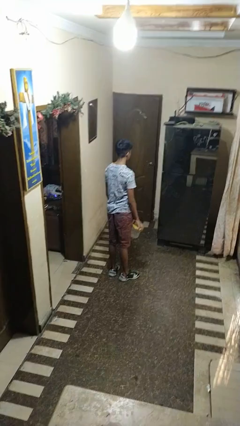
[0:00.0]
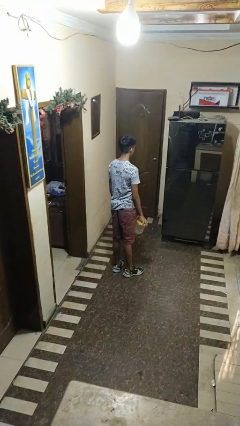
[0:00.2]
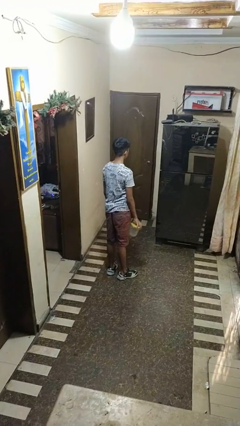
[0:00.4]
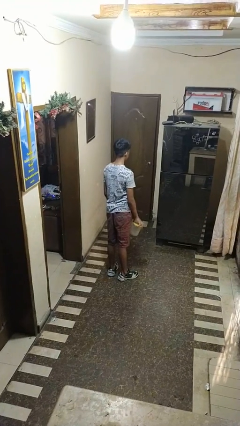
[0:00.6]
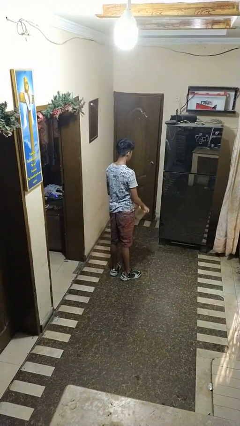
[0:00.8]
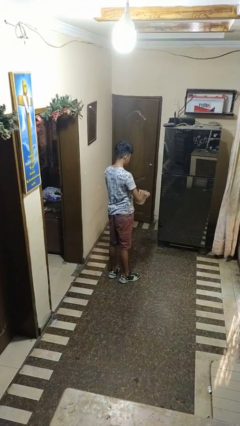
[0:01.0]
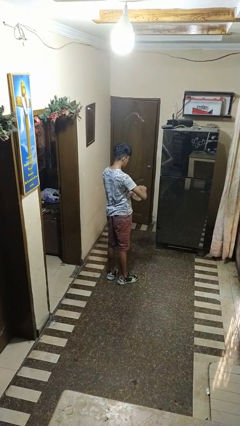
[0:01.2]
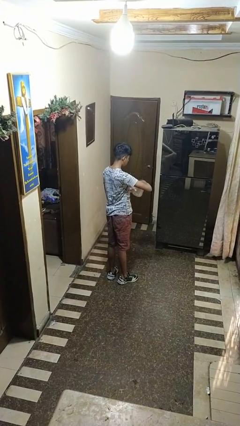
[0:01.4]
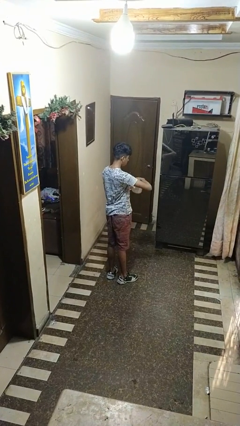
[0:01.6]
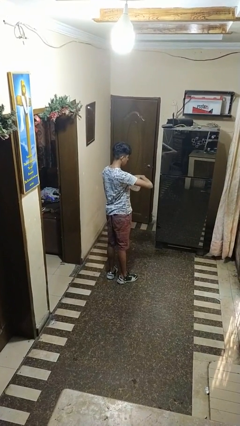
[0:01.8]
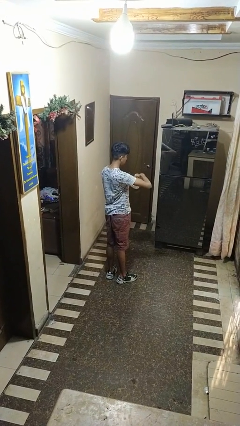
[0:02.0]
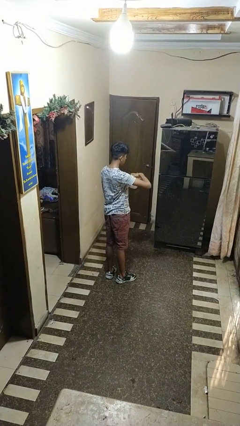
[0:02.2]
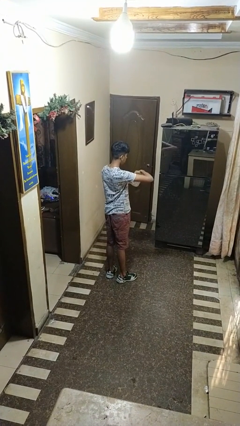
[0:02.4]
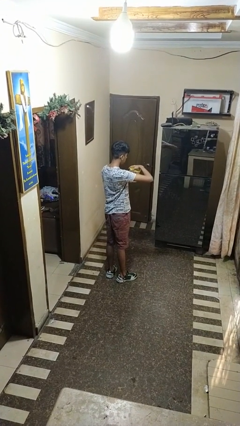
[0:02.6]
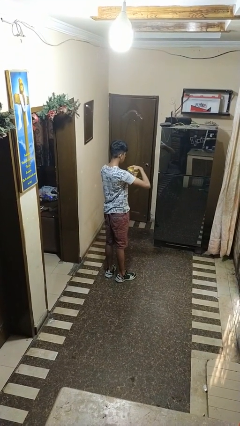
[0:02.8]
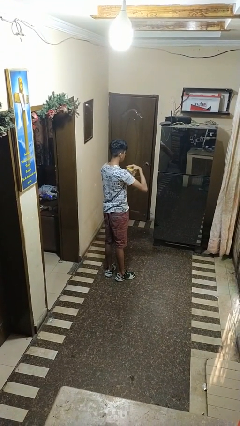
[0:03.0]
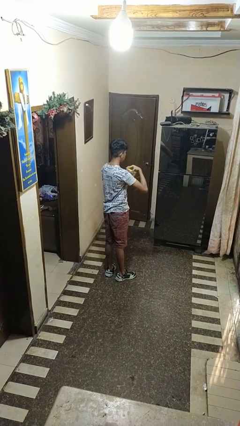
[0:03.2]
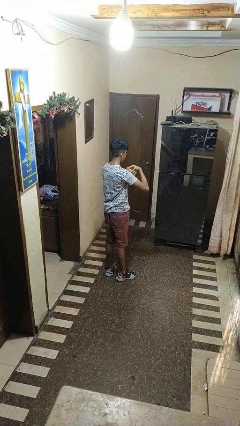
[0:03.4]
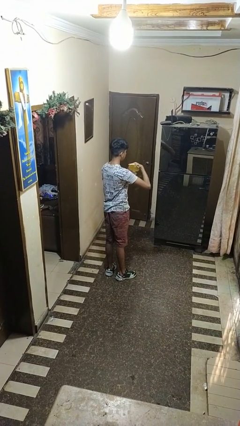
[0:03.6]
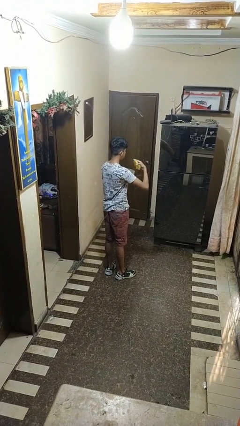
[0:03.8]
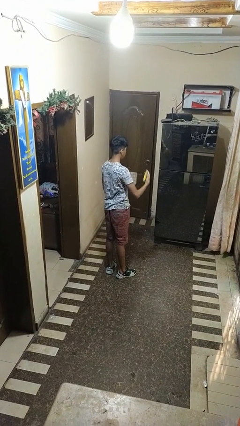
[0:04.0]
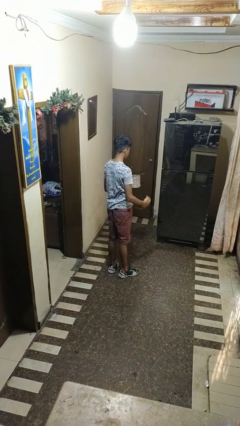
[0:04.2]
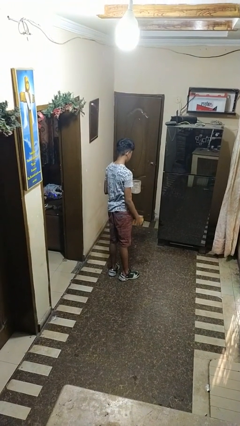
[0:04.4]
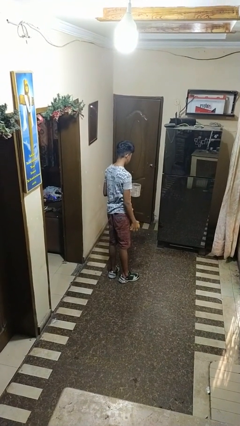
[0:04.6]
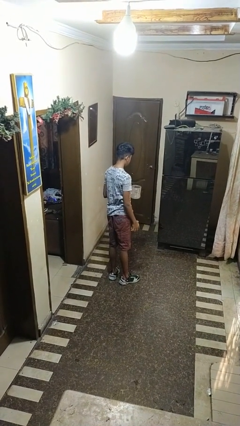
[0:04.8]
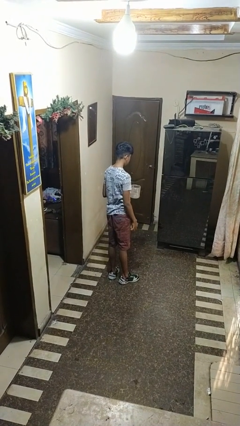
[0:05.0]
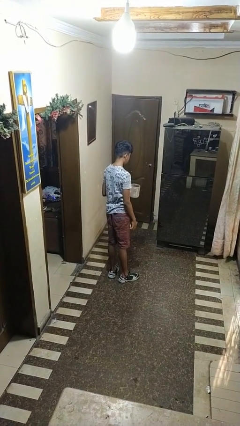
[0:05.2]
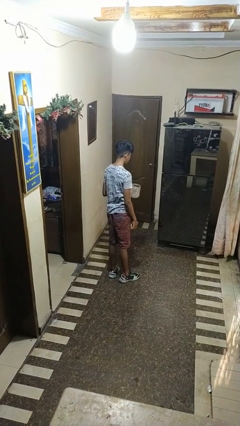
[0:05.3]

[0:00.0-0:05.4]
person opens jar

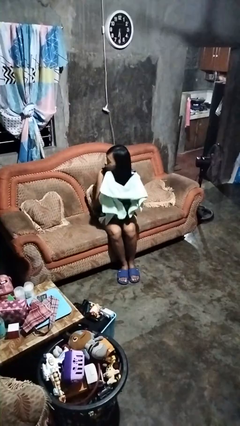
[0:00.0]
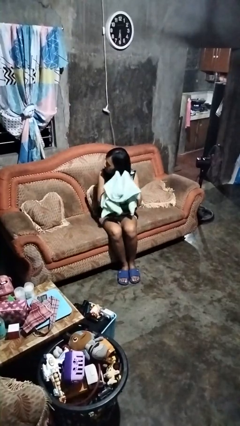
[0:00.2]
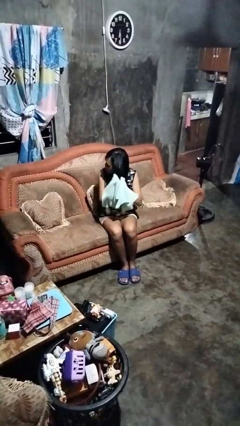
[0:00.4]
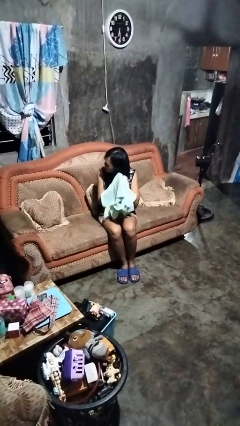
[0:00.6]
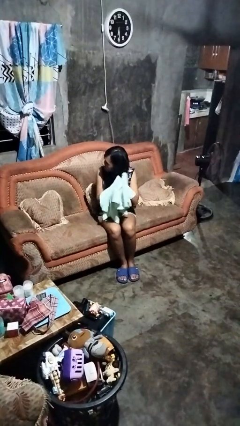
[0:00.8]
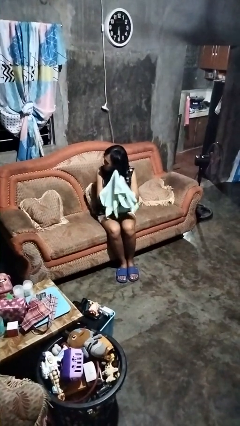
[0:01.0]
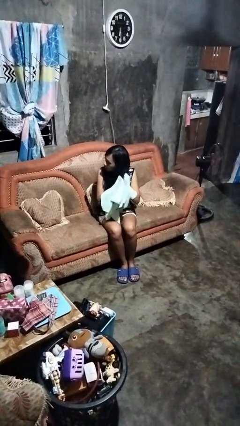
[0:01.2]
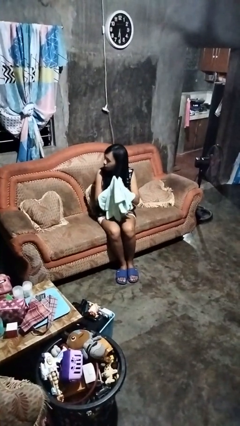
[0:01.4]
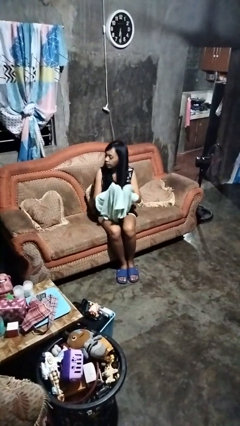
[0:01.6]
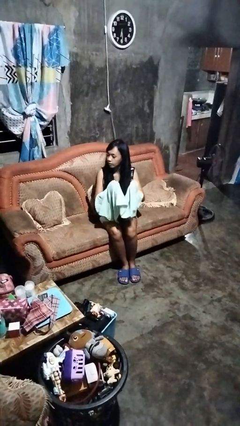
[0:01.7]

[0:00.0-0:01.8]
person dries hair with towel

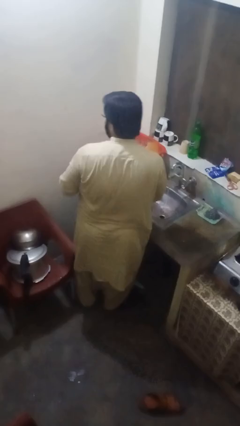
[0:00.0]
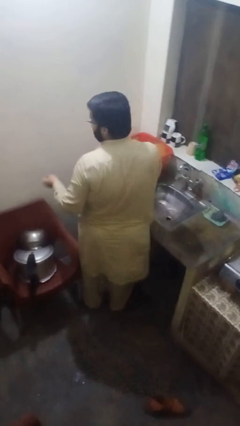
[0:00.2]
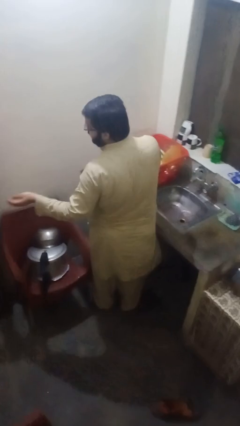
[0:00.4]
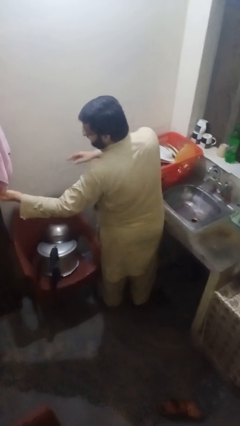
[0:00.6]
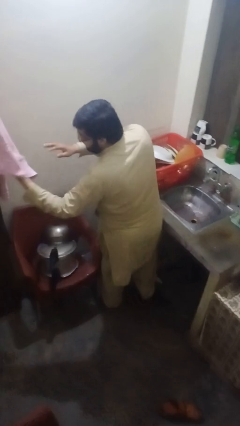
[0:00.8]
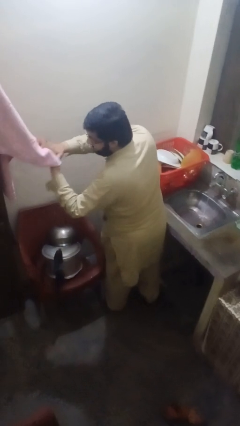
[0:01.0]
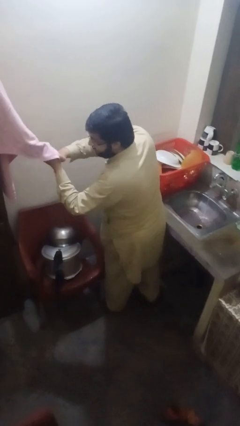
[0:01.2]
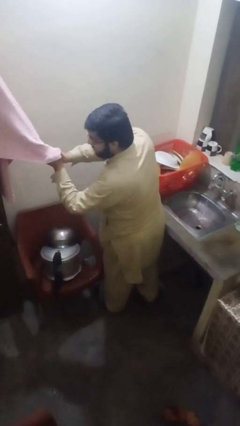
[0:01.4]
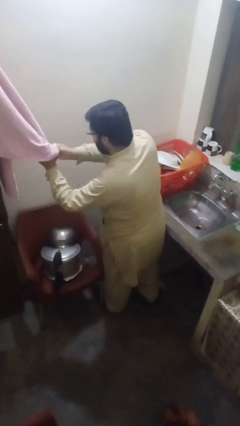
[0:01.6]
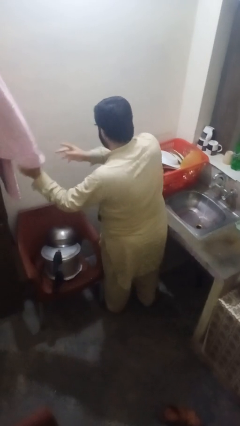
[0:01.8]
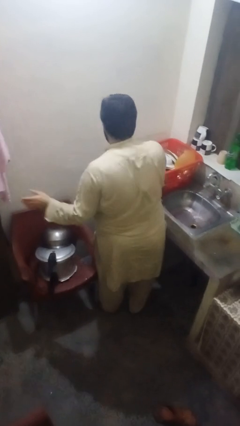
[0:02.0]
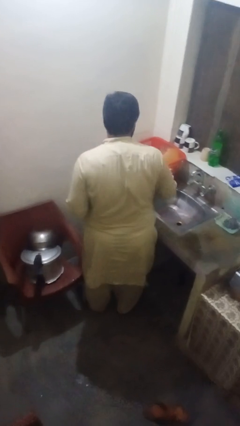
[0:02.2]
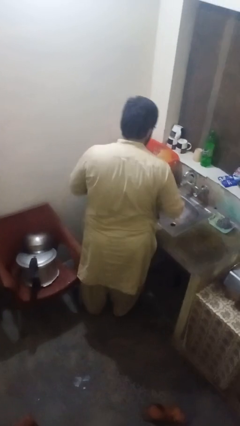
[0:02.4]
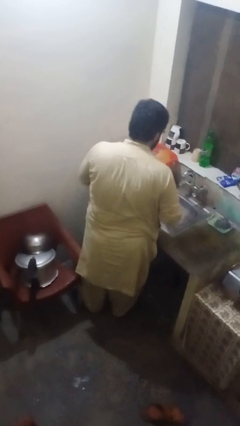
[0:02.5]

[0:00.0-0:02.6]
person dries hands with towel

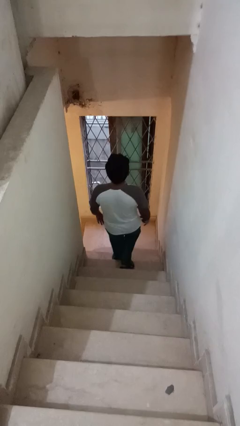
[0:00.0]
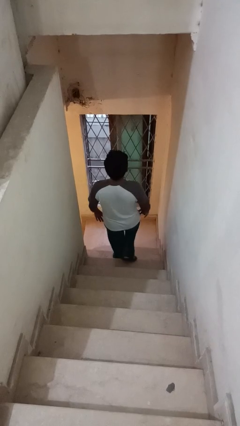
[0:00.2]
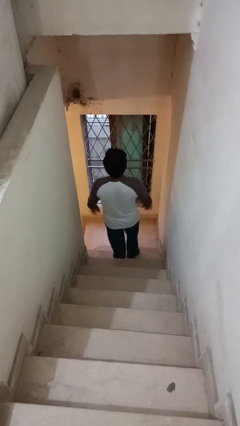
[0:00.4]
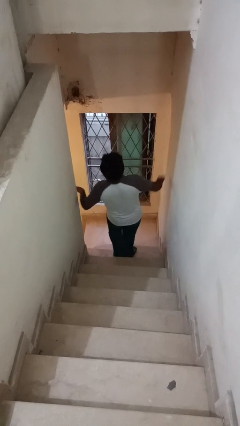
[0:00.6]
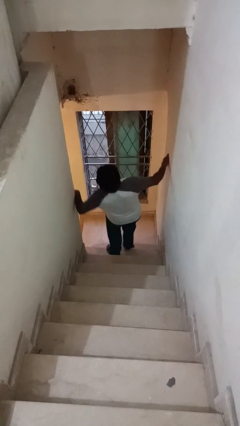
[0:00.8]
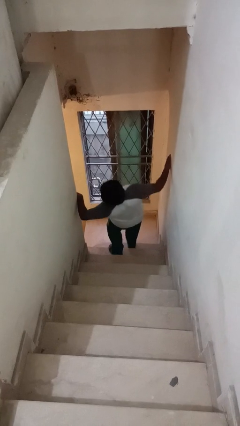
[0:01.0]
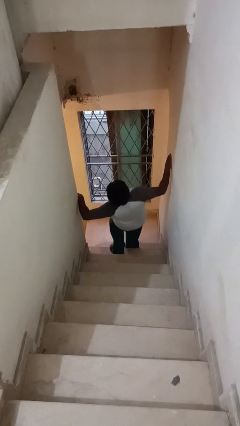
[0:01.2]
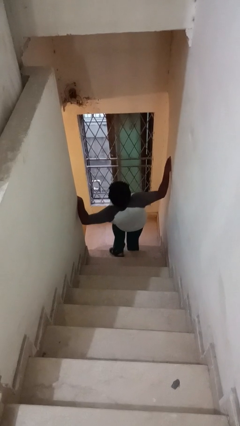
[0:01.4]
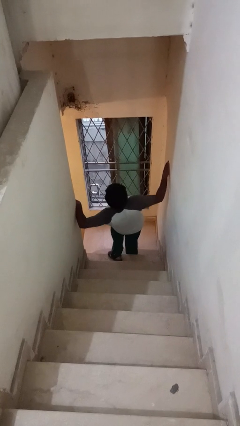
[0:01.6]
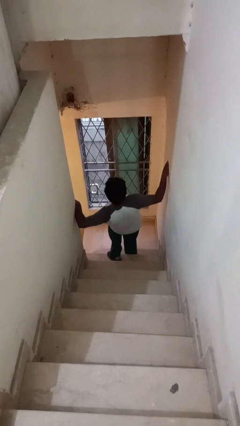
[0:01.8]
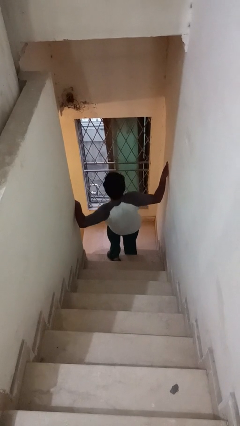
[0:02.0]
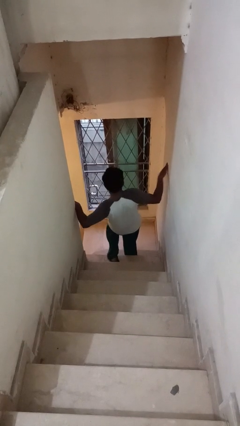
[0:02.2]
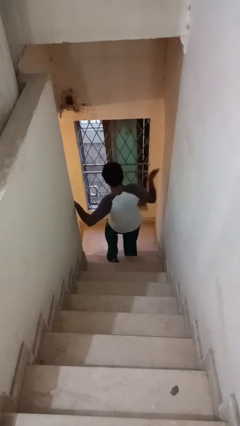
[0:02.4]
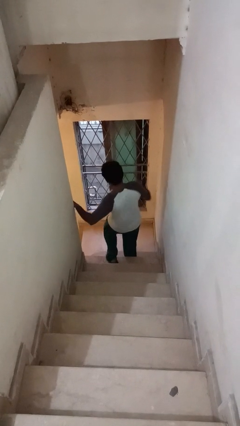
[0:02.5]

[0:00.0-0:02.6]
person trips on stair

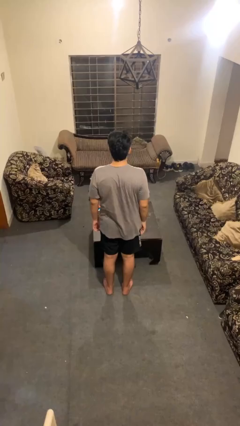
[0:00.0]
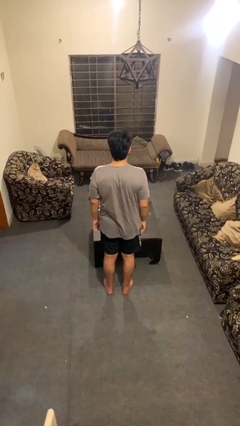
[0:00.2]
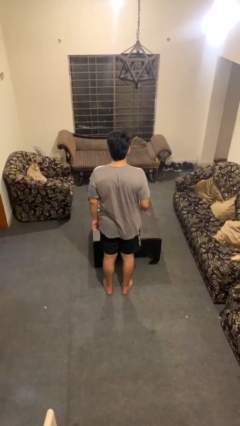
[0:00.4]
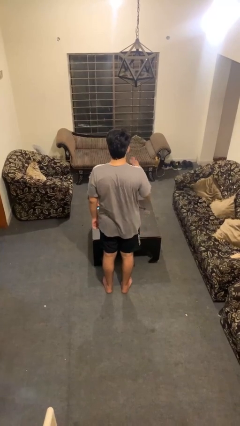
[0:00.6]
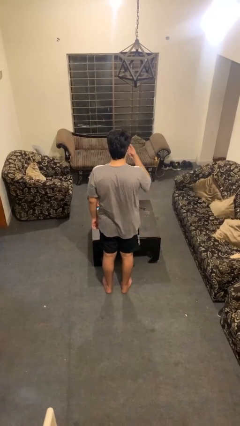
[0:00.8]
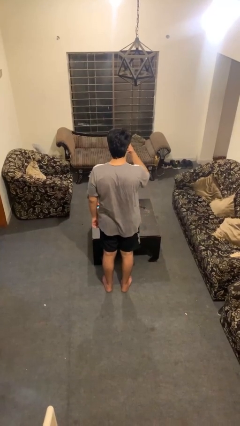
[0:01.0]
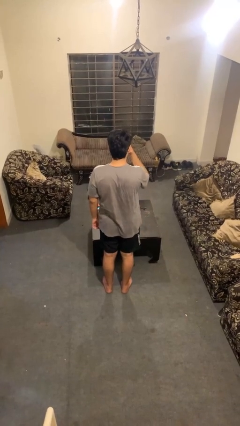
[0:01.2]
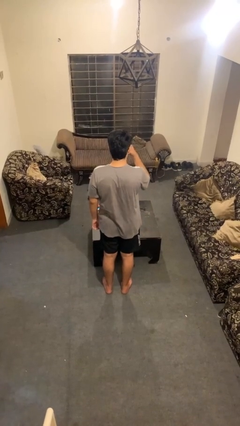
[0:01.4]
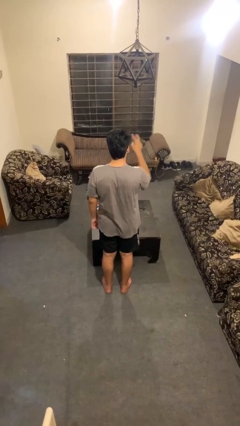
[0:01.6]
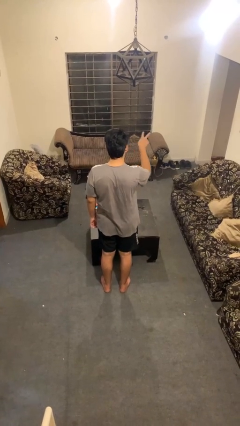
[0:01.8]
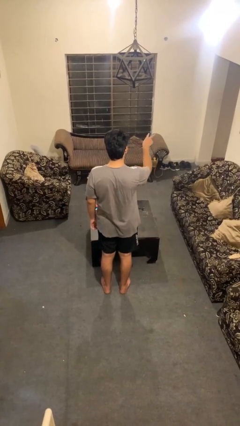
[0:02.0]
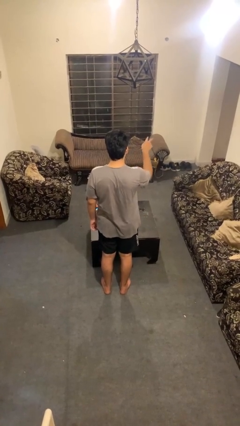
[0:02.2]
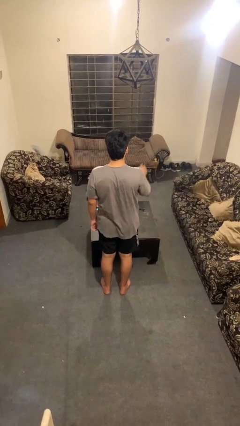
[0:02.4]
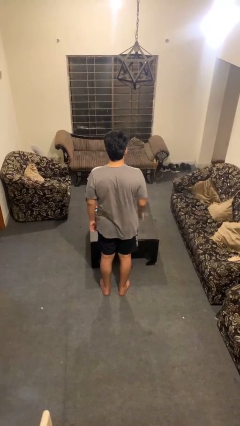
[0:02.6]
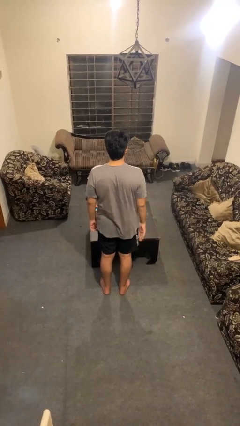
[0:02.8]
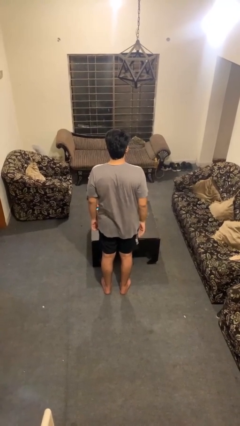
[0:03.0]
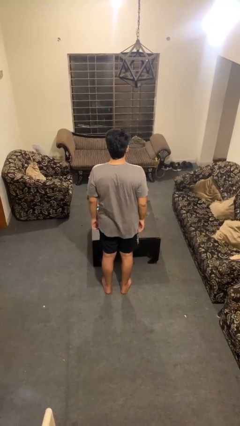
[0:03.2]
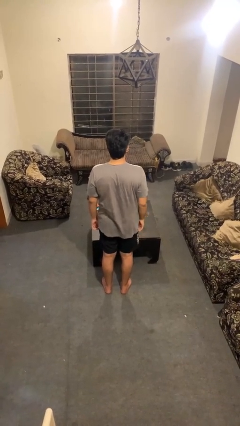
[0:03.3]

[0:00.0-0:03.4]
person gestures watch closely

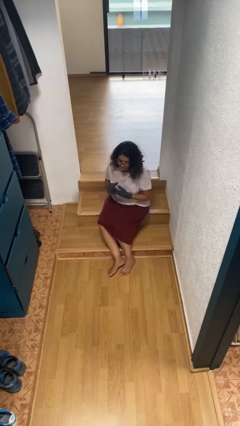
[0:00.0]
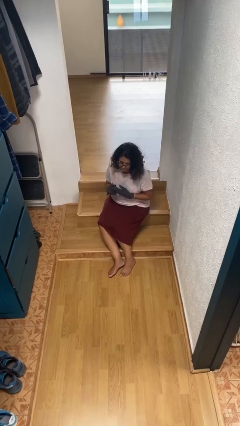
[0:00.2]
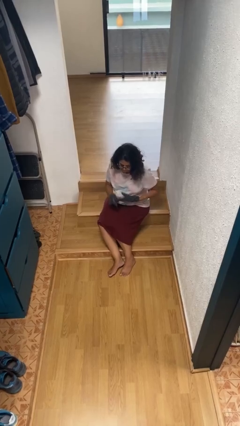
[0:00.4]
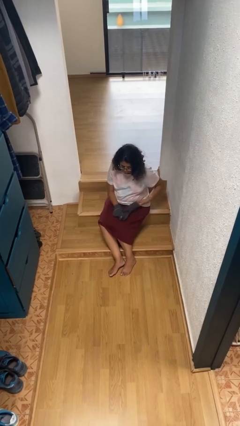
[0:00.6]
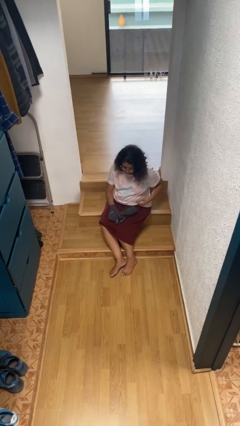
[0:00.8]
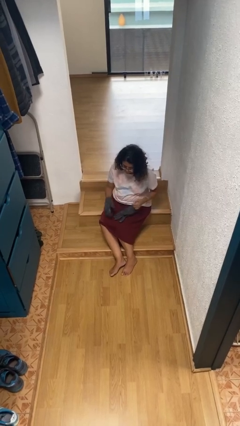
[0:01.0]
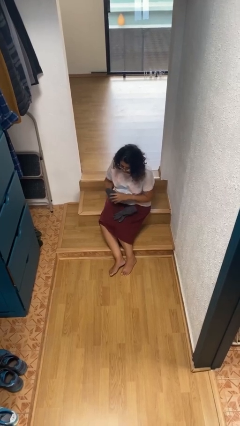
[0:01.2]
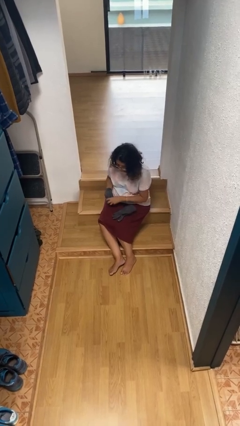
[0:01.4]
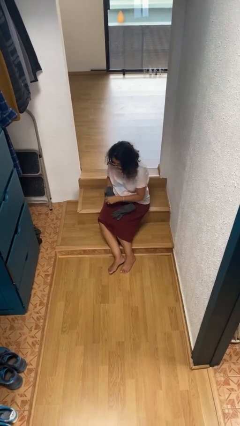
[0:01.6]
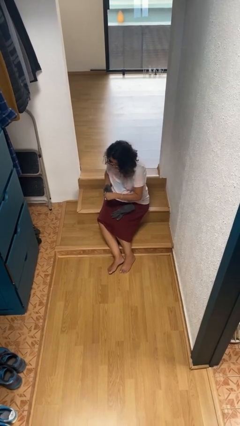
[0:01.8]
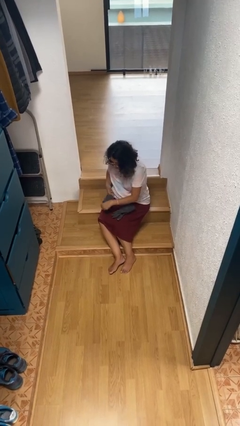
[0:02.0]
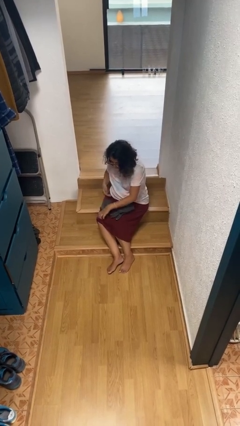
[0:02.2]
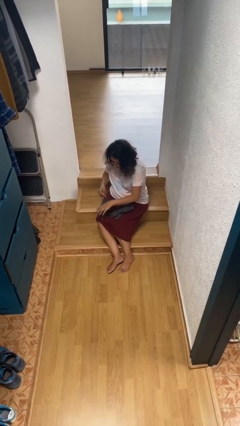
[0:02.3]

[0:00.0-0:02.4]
person takes off gloves
